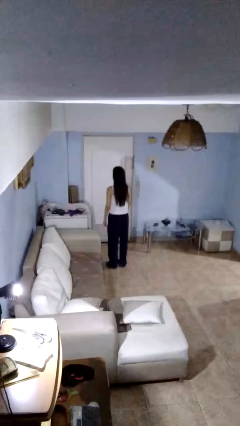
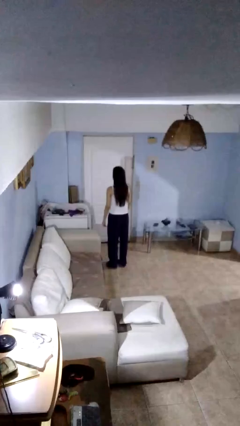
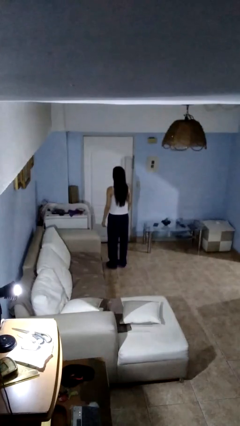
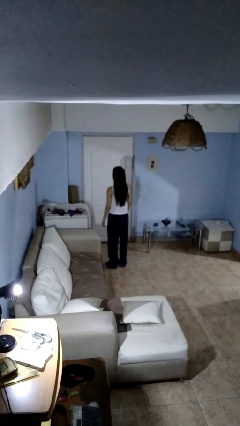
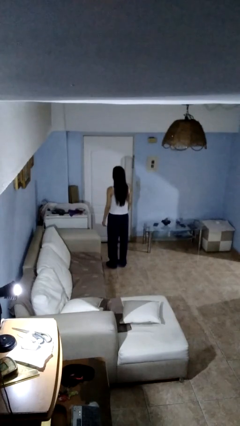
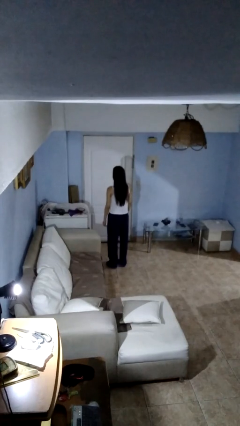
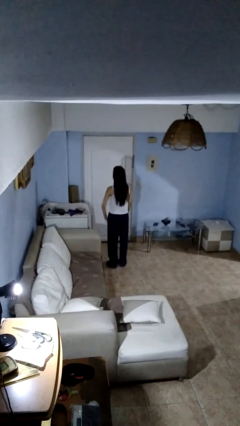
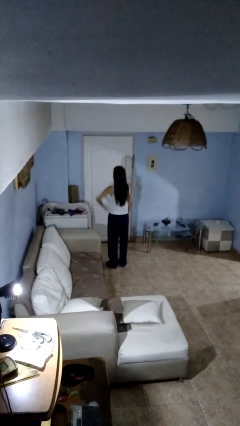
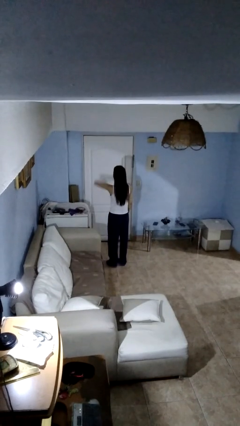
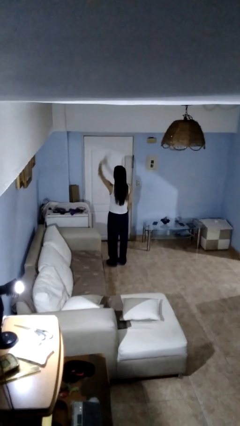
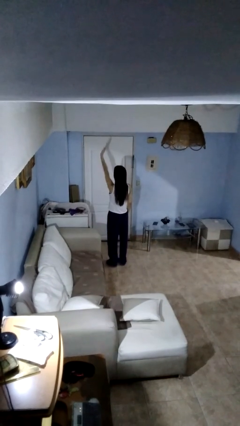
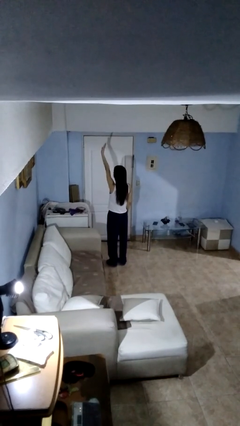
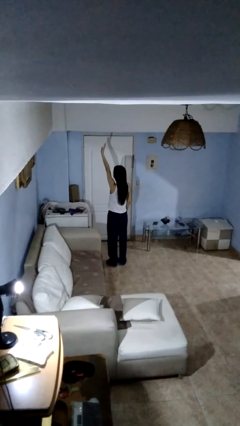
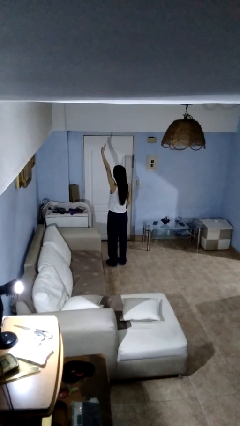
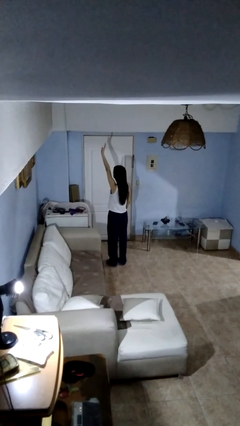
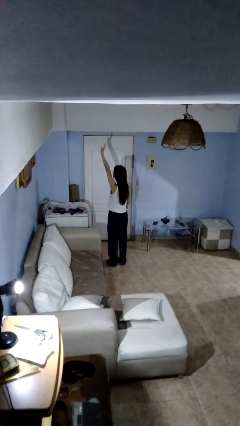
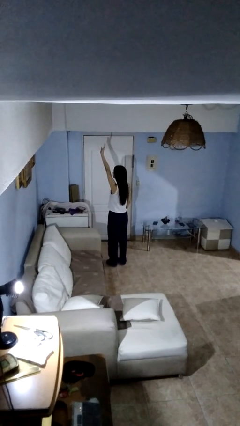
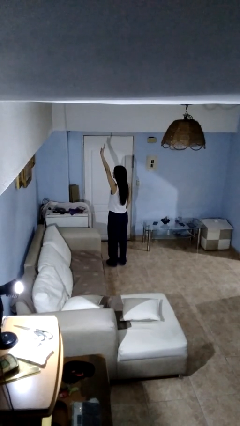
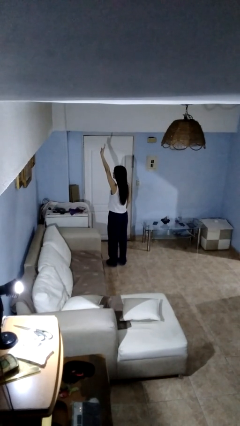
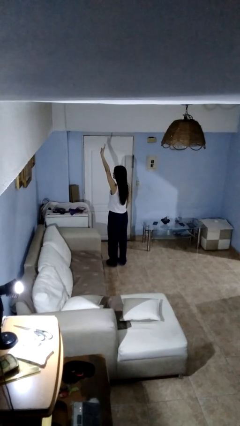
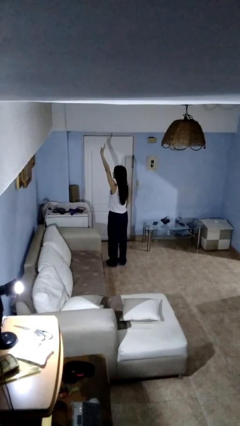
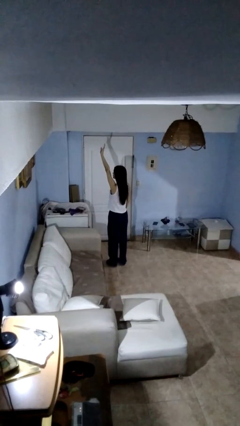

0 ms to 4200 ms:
person gestures swipe up

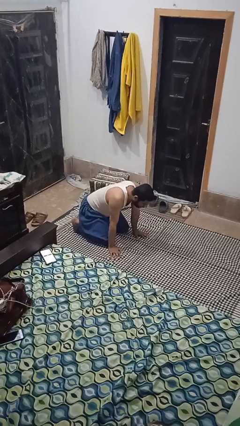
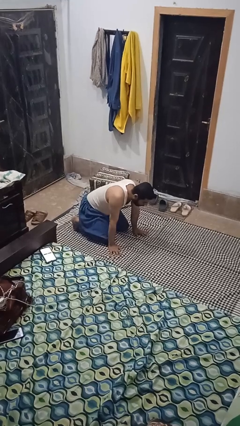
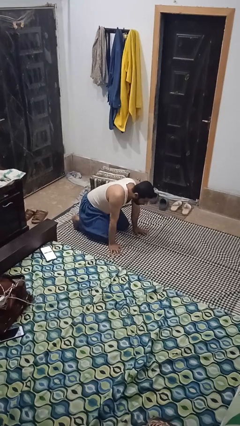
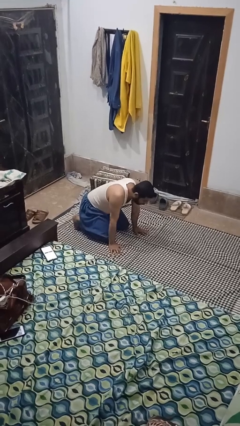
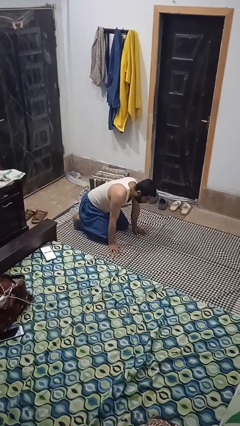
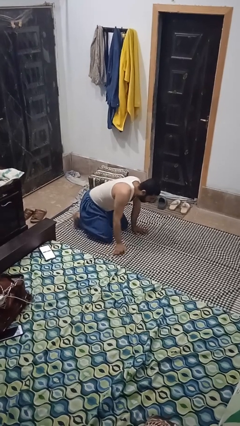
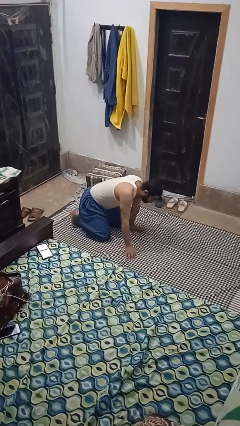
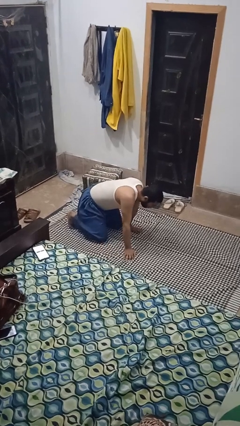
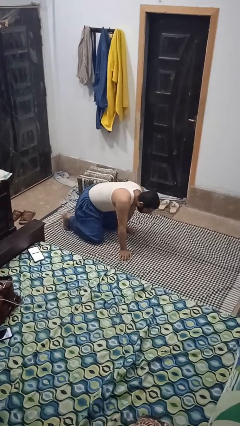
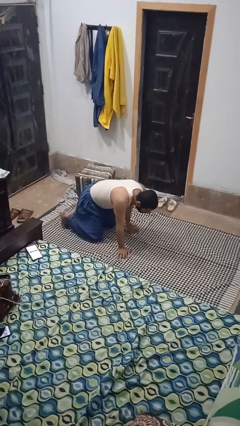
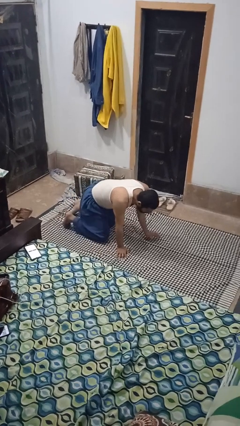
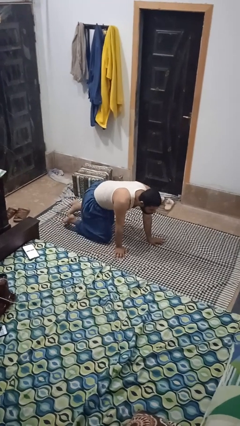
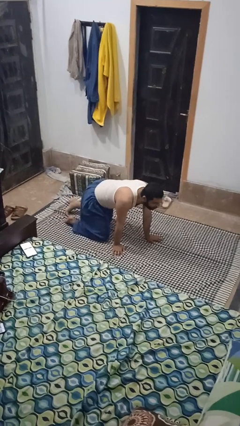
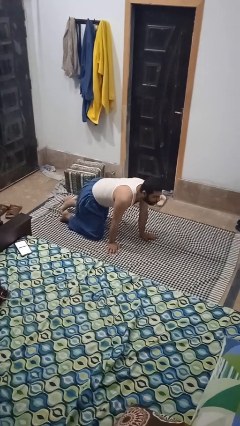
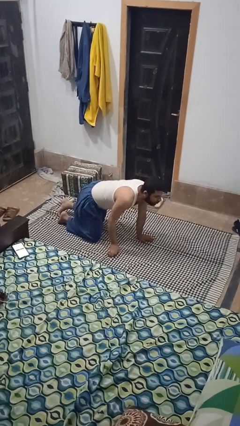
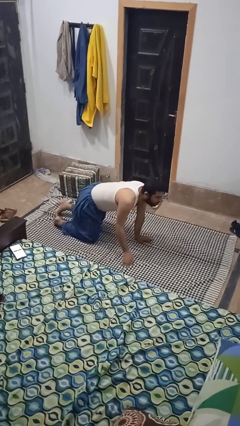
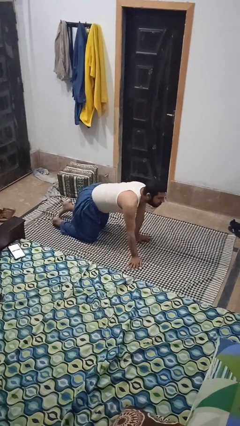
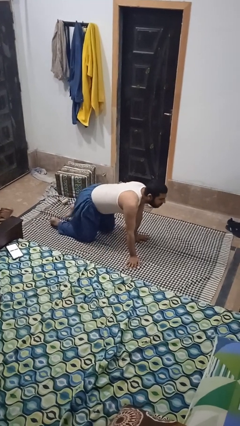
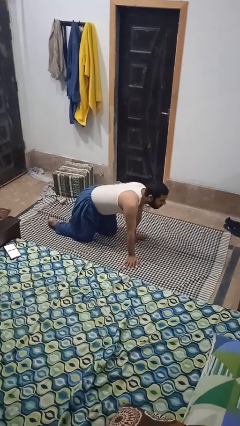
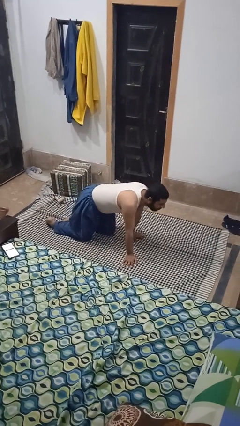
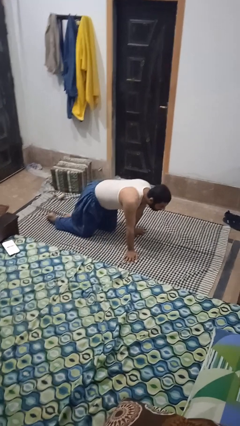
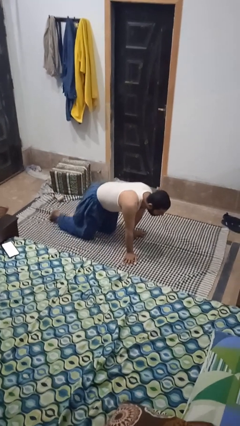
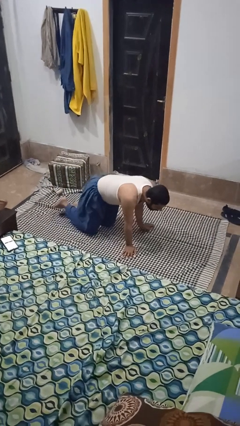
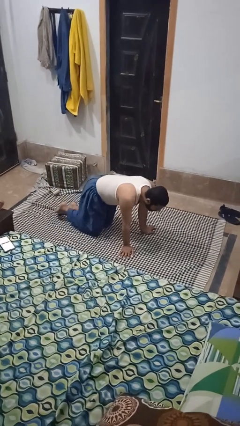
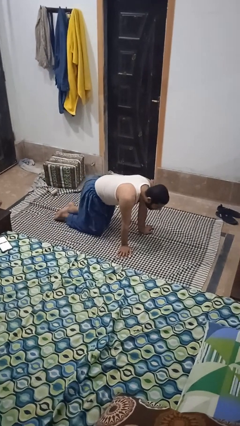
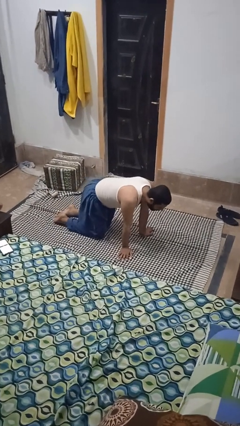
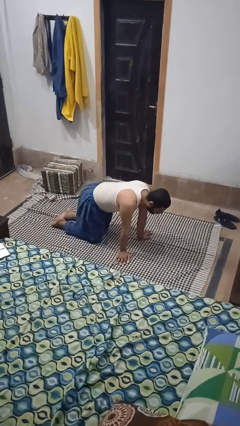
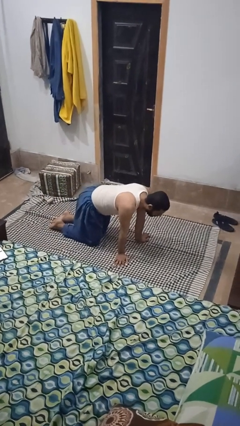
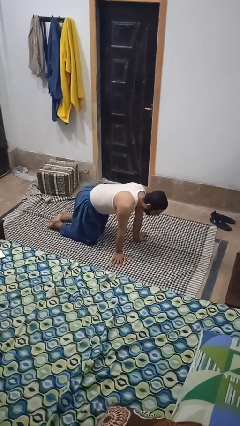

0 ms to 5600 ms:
person crawls

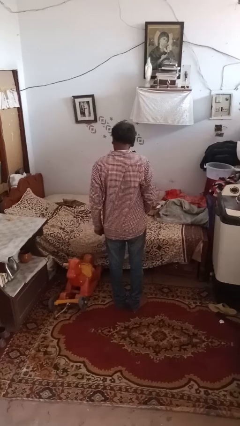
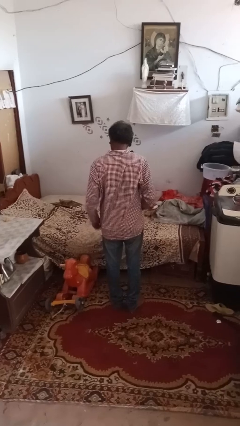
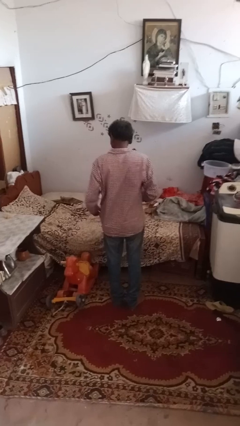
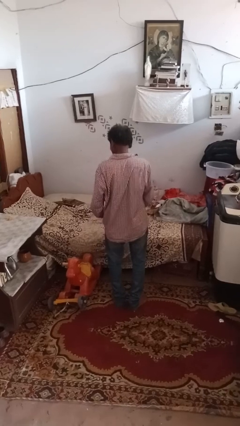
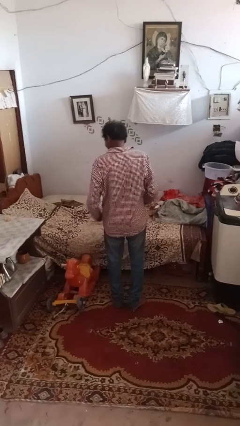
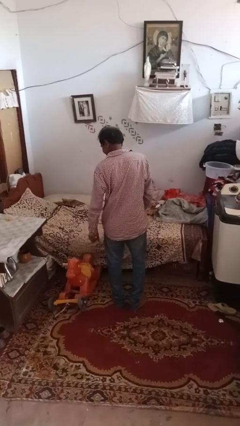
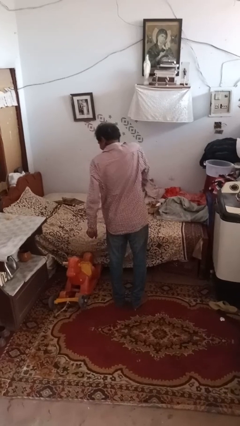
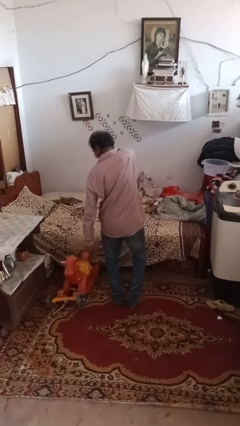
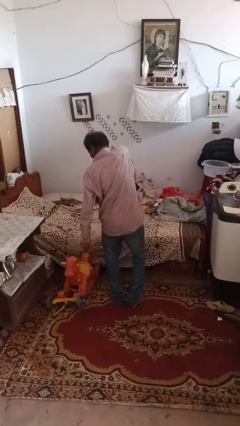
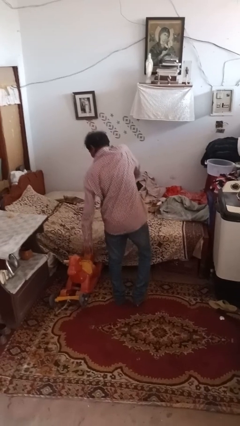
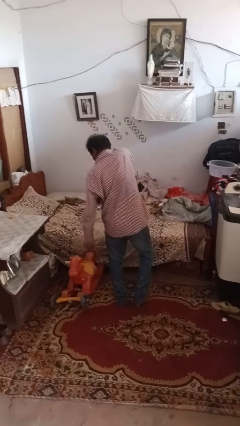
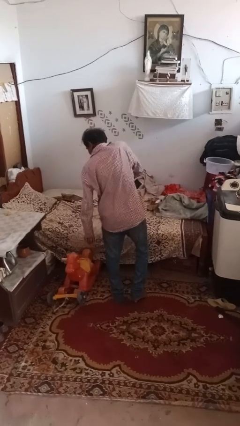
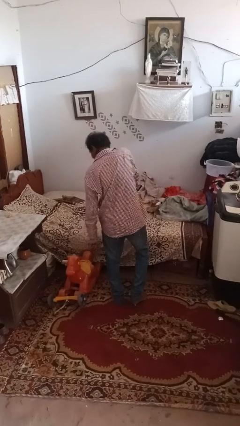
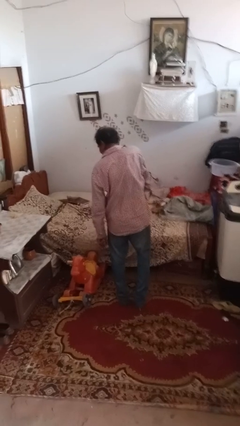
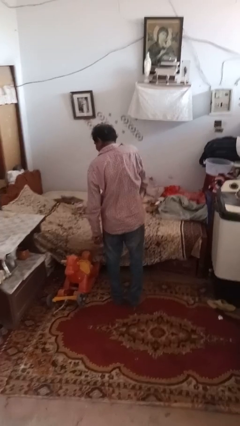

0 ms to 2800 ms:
person dances in place

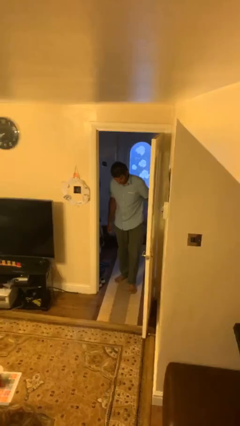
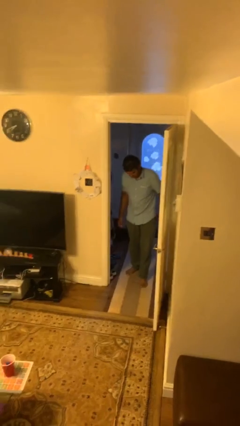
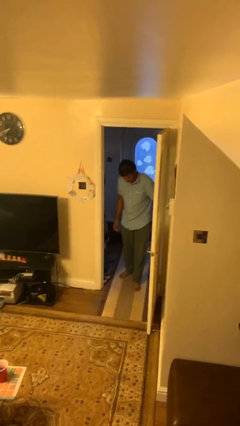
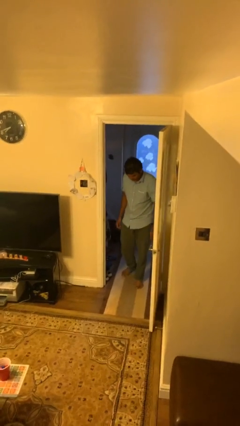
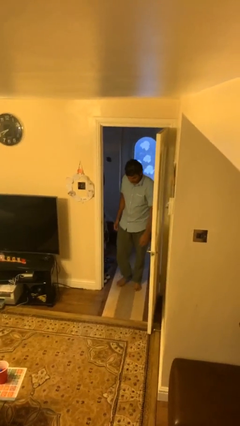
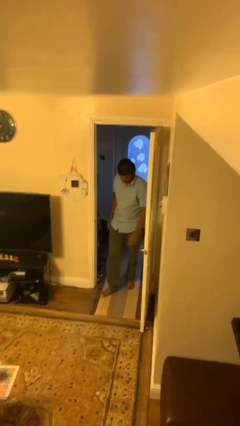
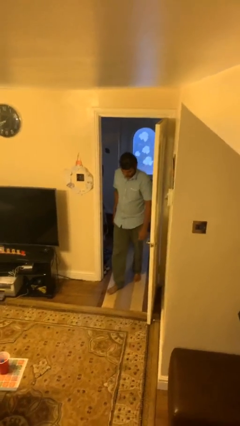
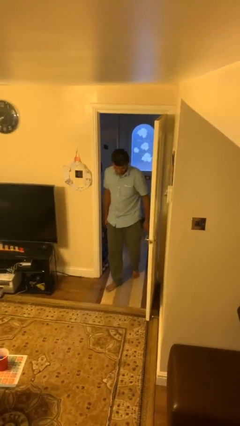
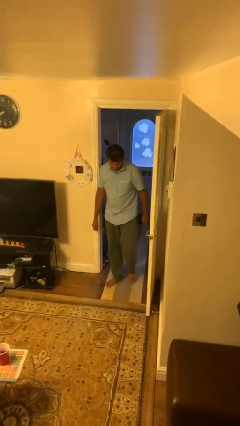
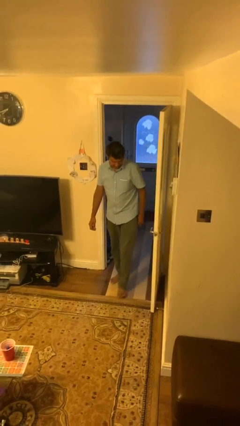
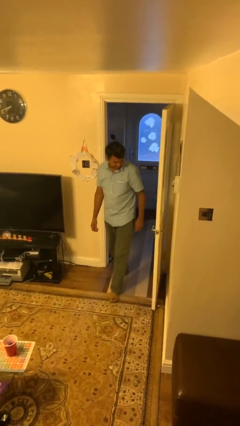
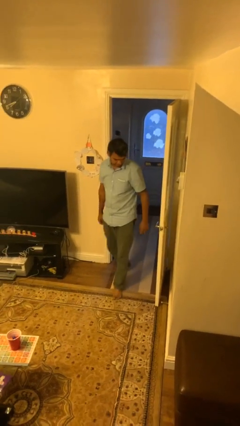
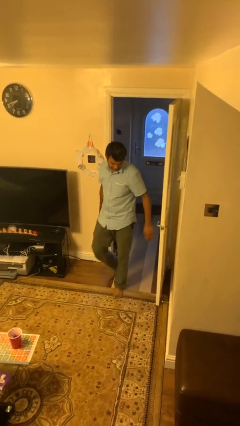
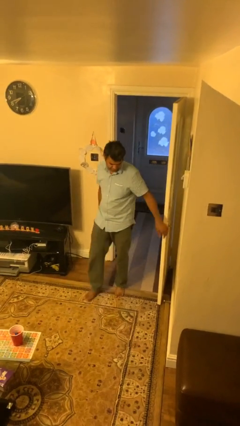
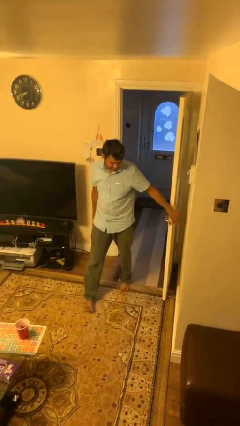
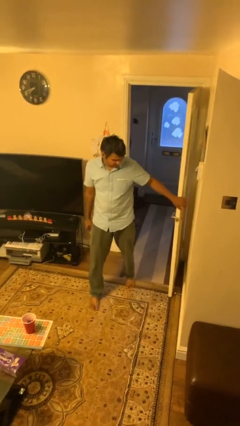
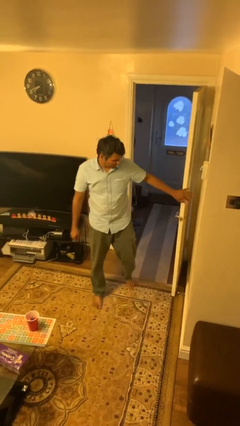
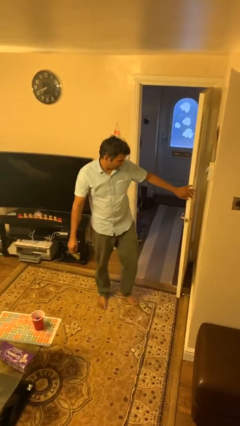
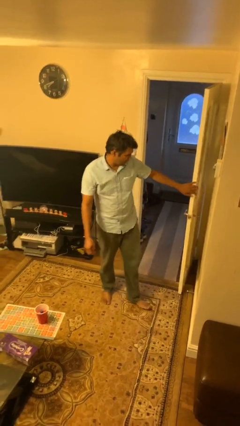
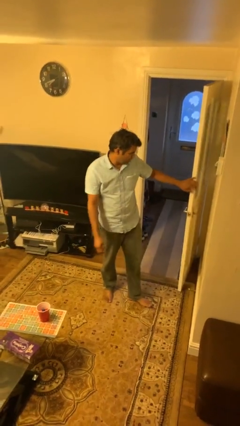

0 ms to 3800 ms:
person enters scene through structure

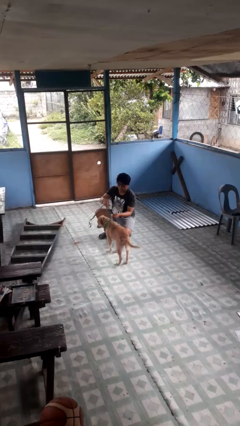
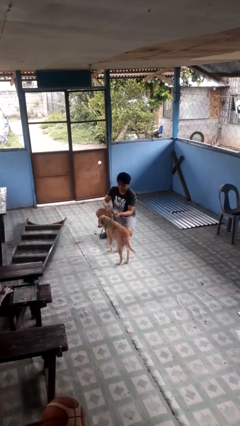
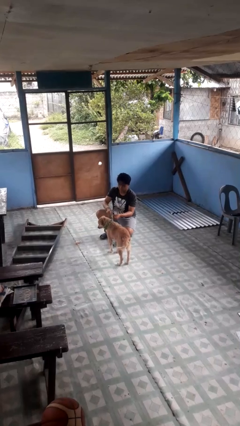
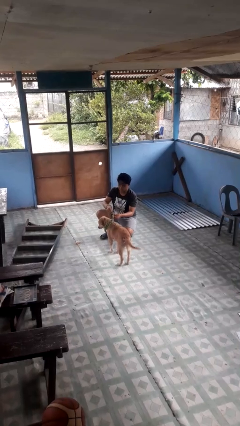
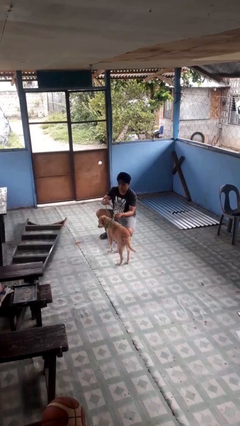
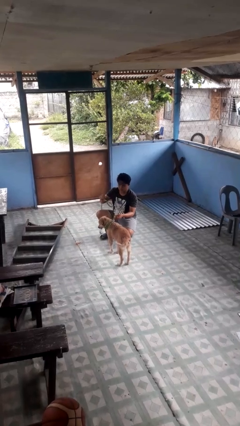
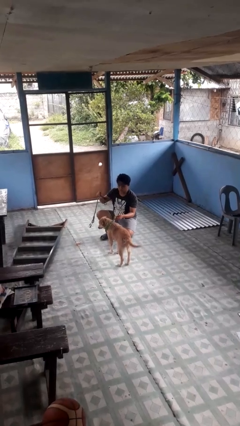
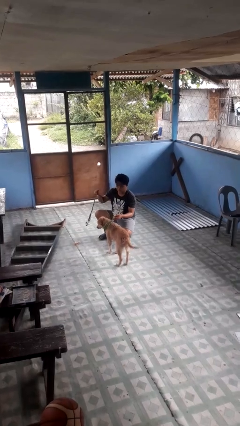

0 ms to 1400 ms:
person unattaches leash from dog
